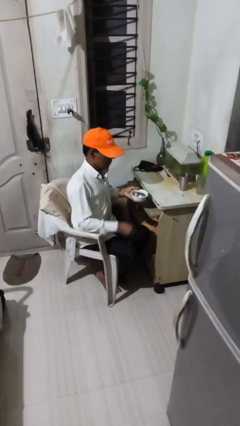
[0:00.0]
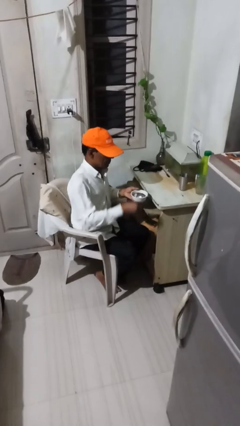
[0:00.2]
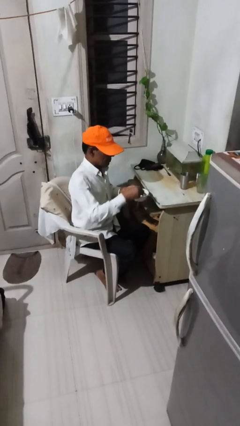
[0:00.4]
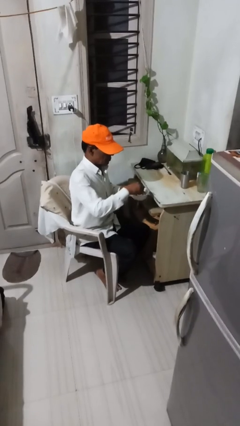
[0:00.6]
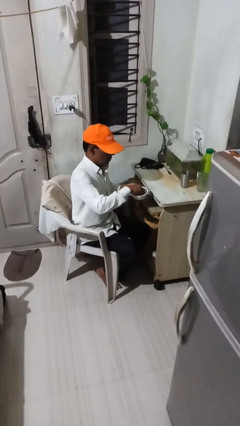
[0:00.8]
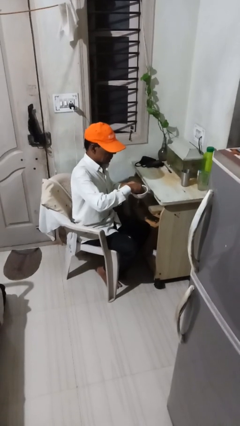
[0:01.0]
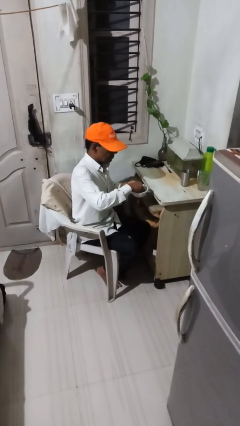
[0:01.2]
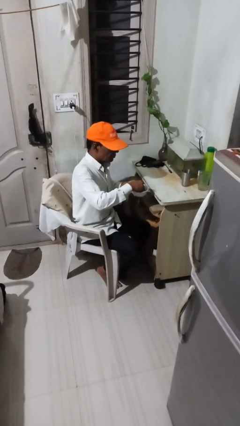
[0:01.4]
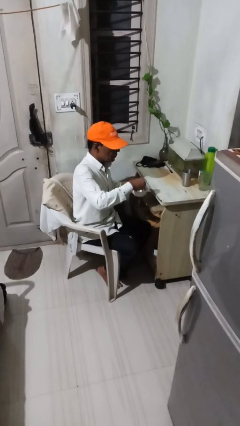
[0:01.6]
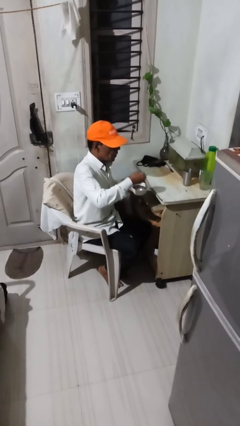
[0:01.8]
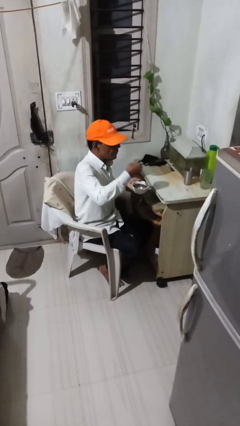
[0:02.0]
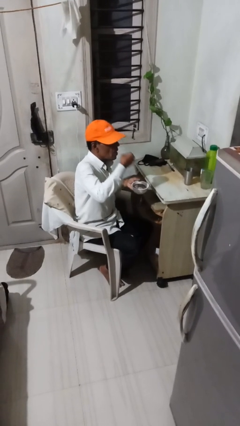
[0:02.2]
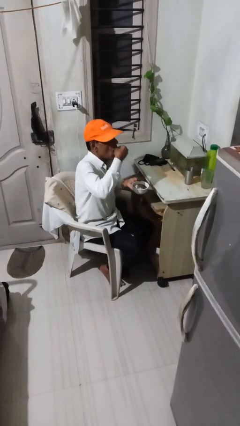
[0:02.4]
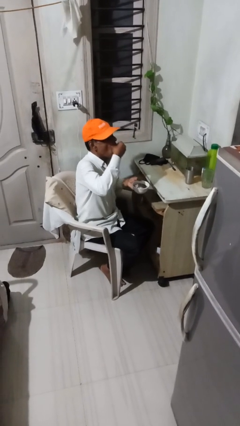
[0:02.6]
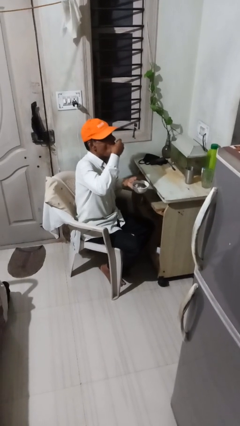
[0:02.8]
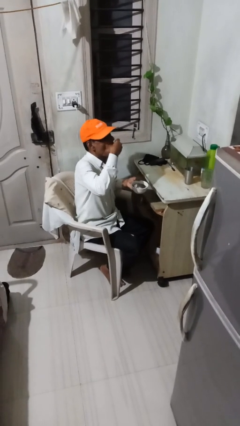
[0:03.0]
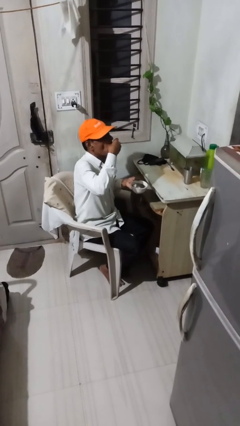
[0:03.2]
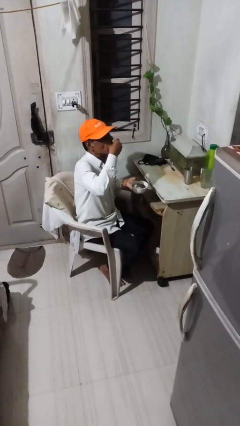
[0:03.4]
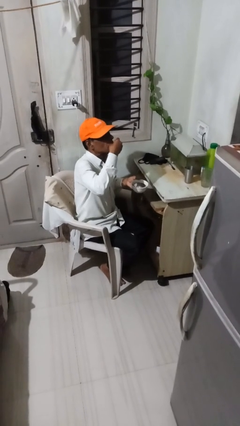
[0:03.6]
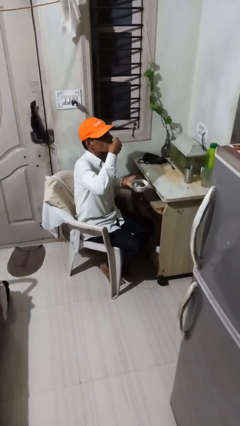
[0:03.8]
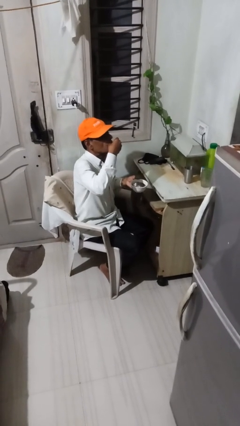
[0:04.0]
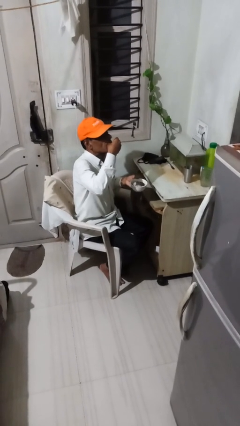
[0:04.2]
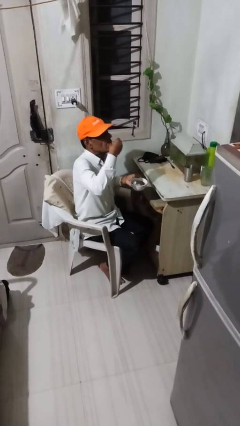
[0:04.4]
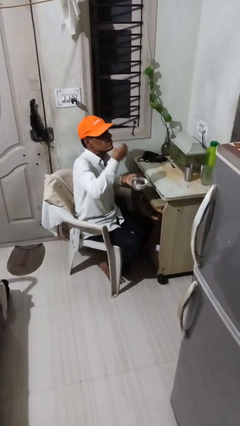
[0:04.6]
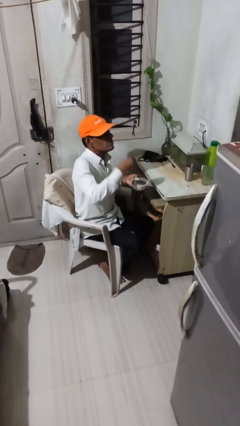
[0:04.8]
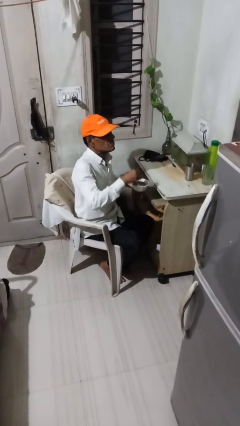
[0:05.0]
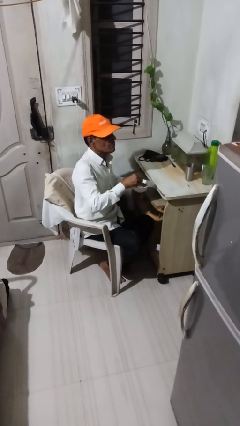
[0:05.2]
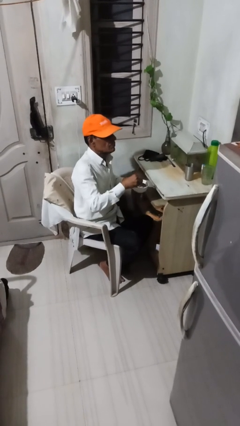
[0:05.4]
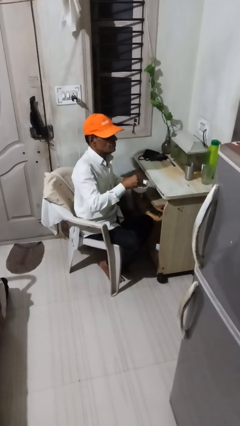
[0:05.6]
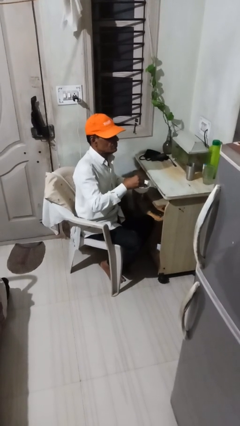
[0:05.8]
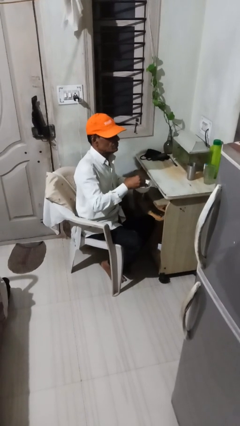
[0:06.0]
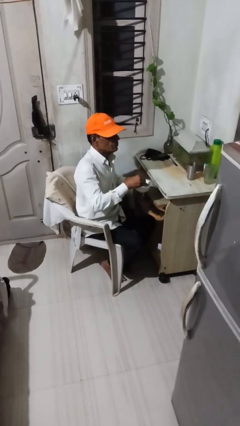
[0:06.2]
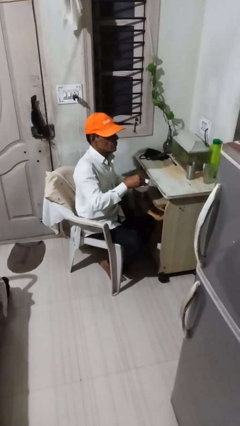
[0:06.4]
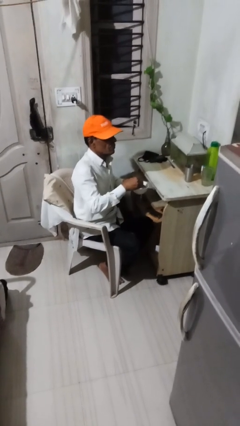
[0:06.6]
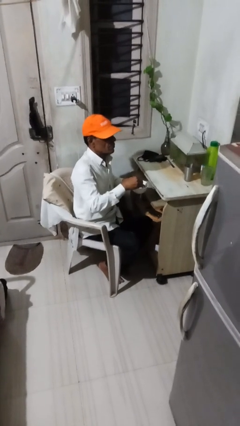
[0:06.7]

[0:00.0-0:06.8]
person eats with hands

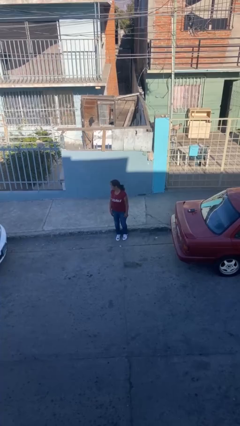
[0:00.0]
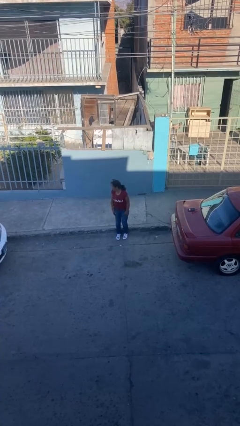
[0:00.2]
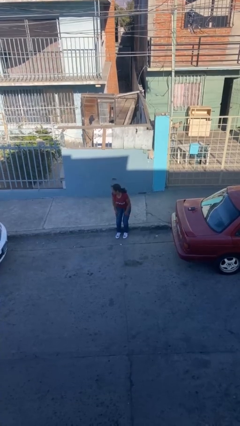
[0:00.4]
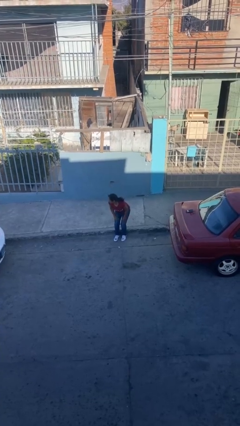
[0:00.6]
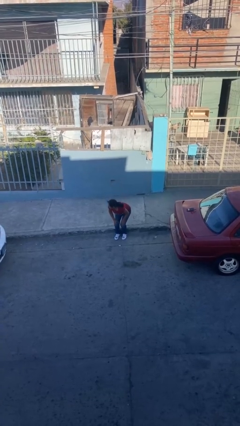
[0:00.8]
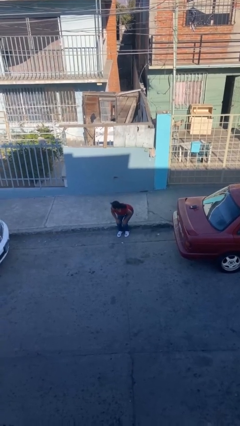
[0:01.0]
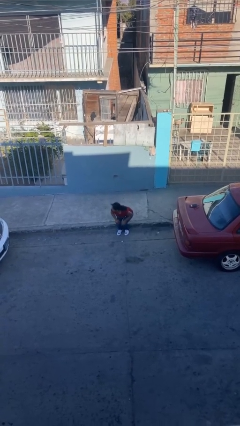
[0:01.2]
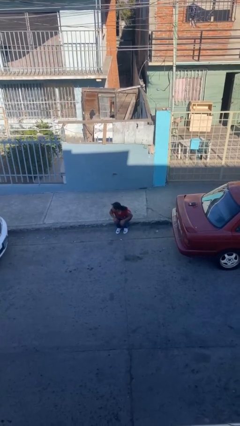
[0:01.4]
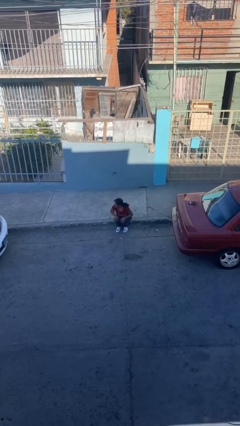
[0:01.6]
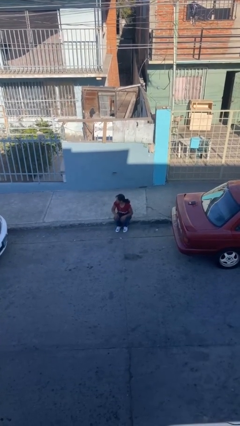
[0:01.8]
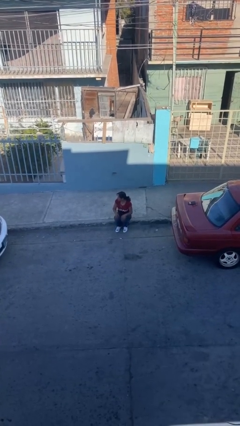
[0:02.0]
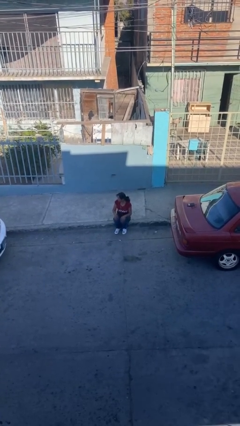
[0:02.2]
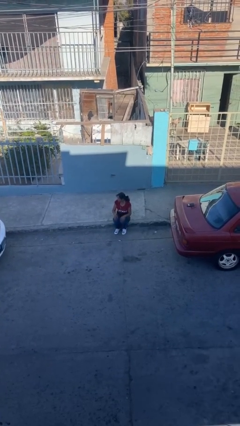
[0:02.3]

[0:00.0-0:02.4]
person sits down

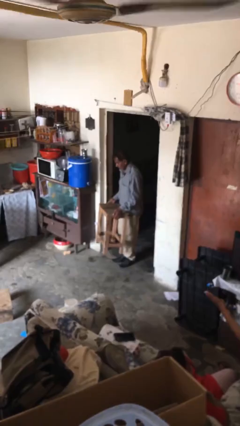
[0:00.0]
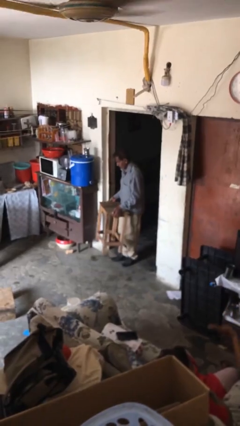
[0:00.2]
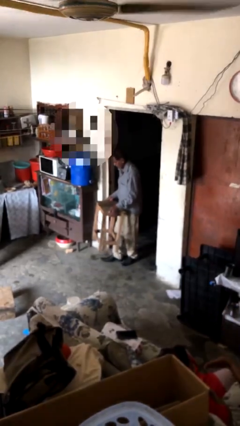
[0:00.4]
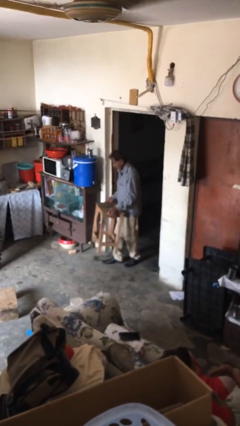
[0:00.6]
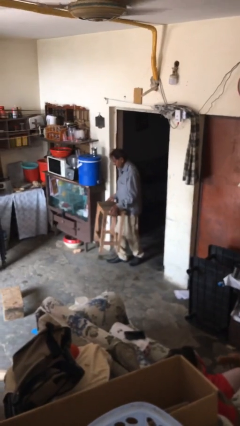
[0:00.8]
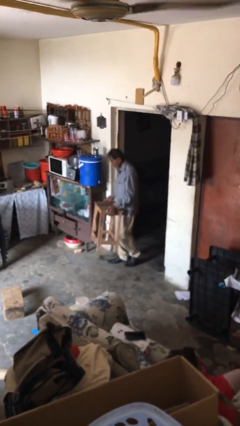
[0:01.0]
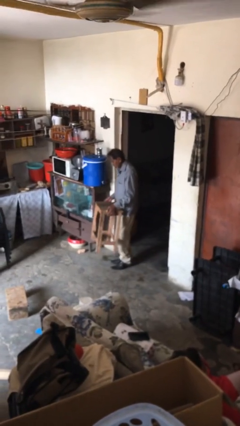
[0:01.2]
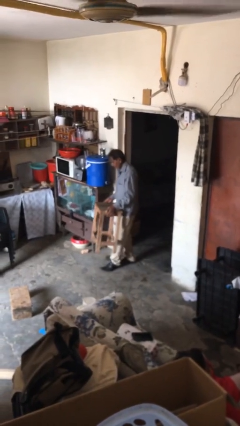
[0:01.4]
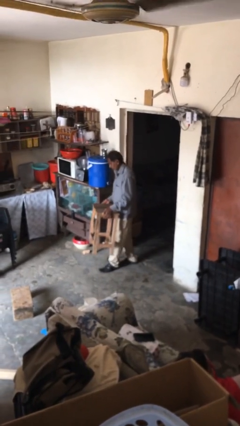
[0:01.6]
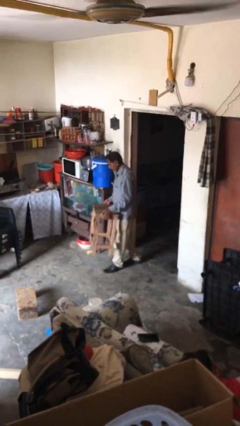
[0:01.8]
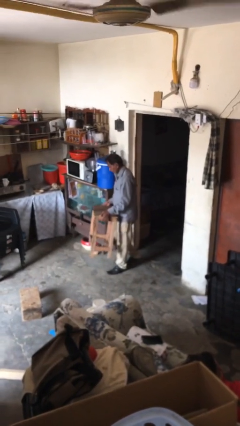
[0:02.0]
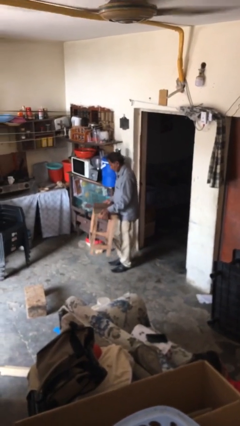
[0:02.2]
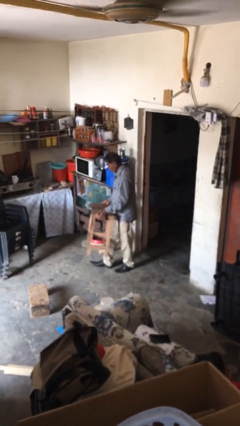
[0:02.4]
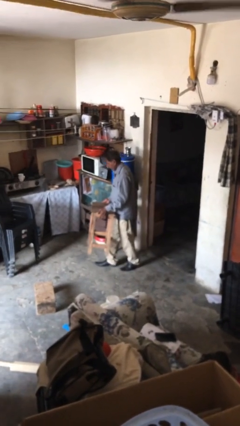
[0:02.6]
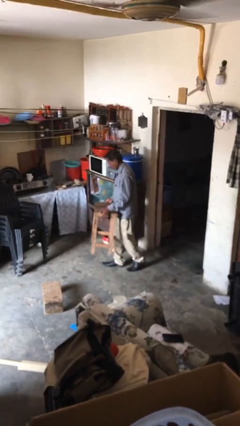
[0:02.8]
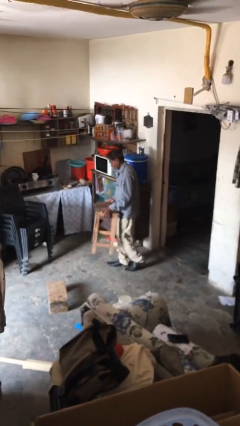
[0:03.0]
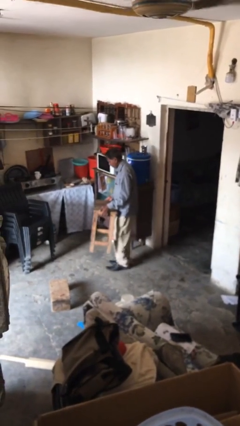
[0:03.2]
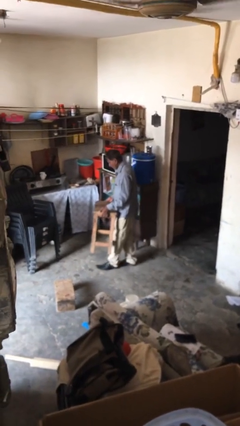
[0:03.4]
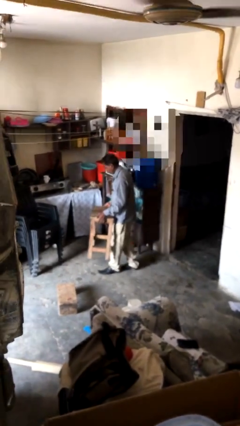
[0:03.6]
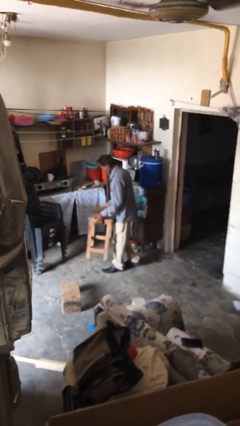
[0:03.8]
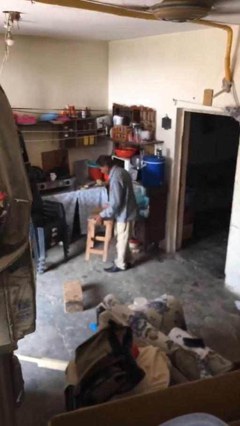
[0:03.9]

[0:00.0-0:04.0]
person carries heavy object

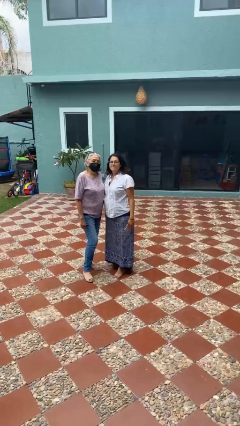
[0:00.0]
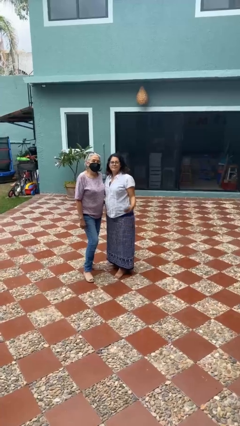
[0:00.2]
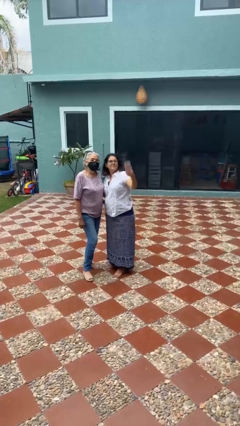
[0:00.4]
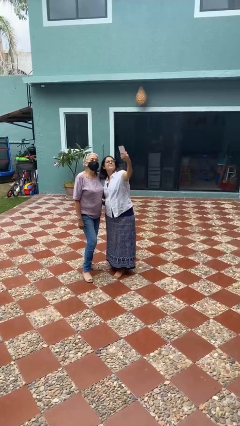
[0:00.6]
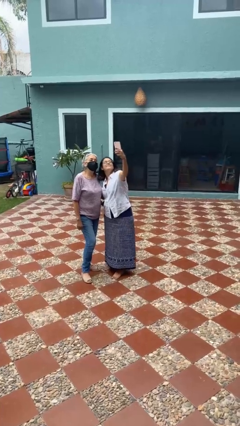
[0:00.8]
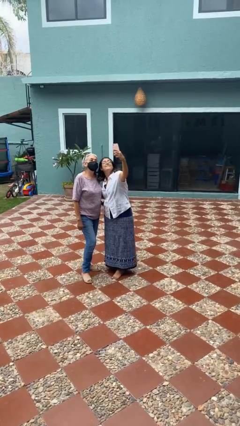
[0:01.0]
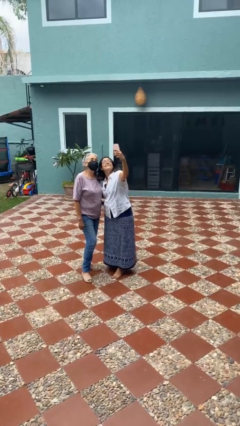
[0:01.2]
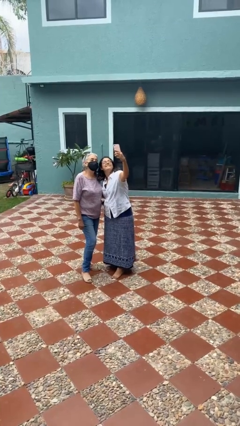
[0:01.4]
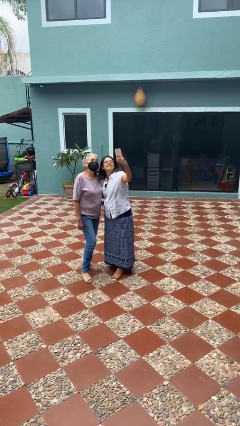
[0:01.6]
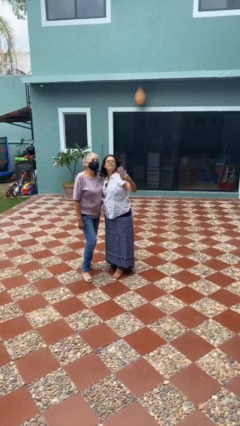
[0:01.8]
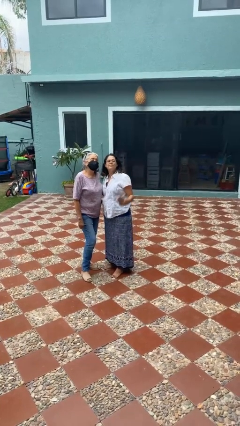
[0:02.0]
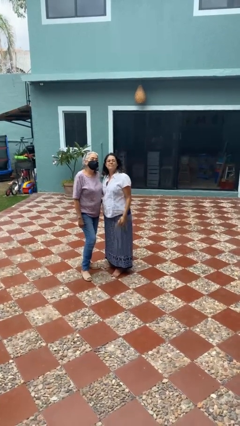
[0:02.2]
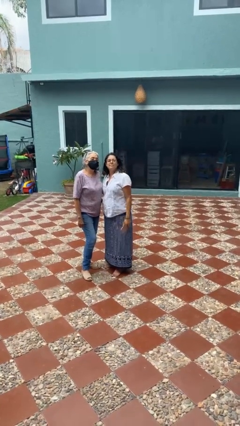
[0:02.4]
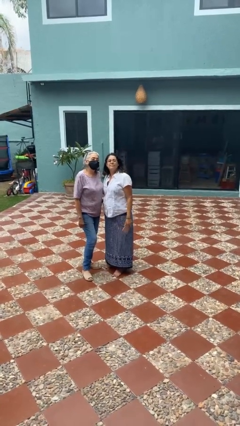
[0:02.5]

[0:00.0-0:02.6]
person takes selfie with person

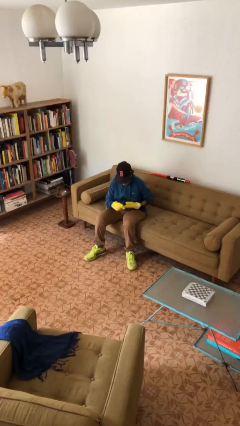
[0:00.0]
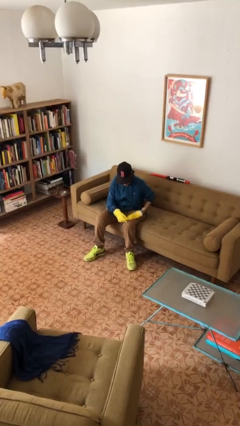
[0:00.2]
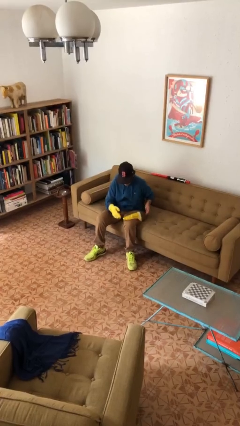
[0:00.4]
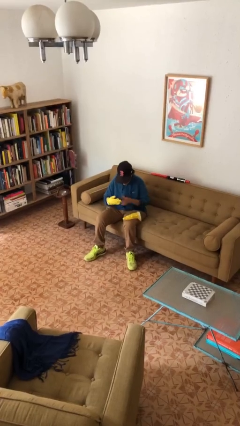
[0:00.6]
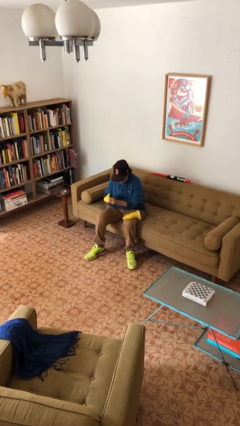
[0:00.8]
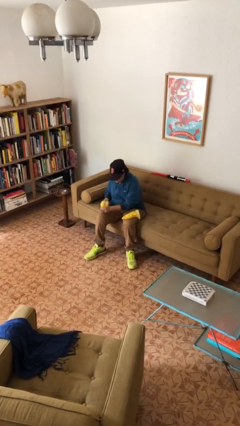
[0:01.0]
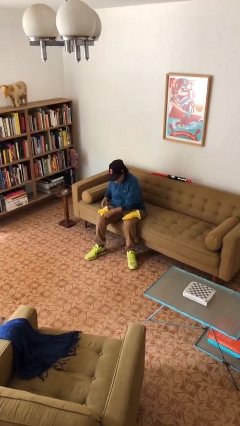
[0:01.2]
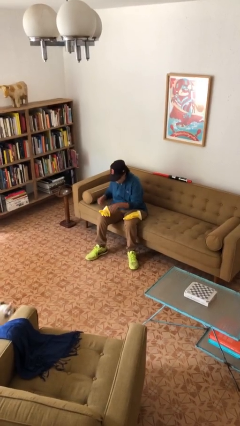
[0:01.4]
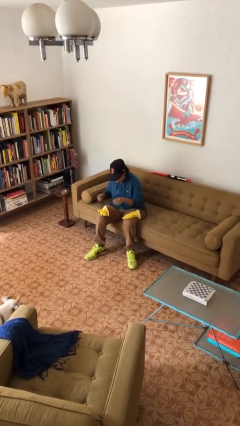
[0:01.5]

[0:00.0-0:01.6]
person takes off gloves
